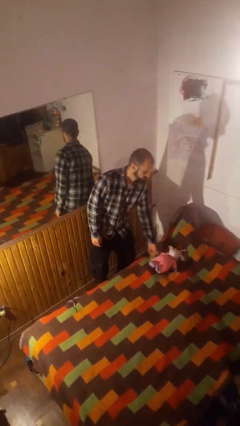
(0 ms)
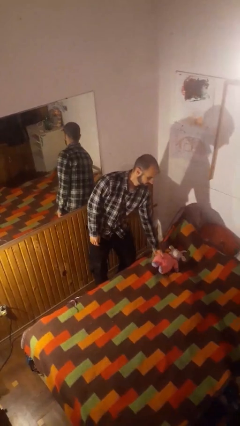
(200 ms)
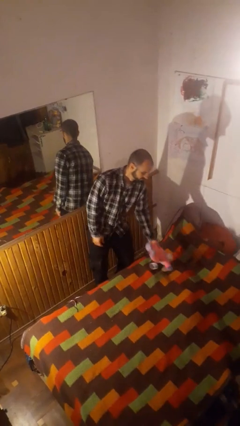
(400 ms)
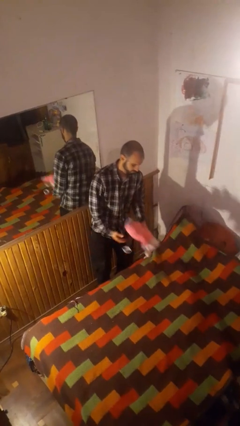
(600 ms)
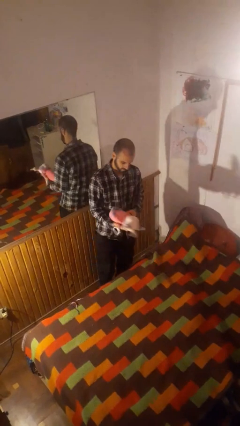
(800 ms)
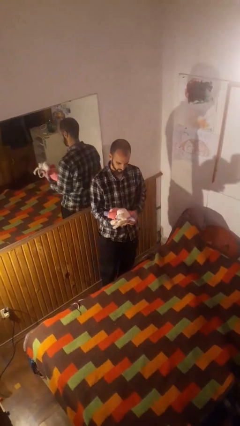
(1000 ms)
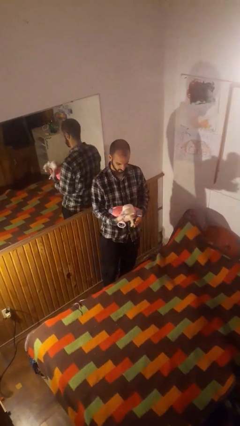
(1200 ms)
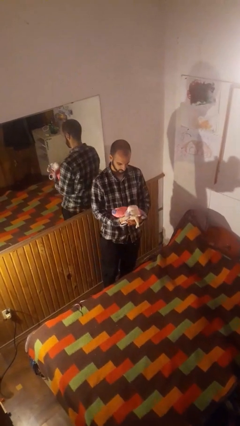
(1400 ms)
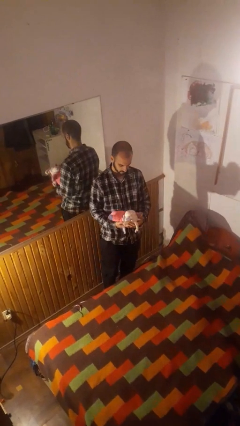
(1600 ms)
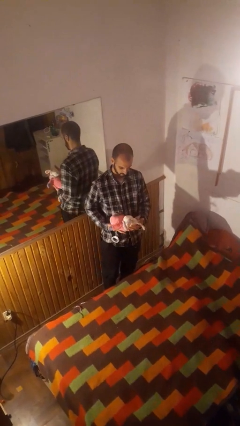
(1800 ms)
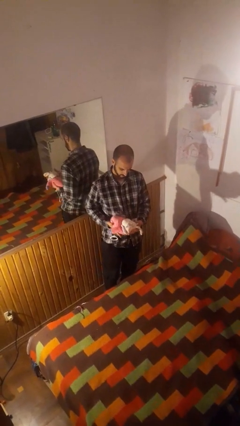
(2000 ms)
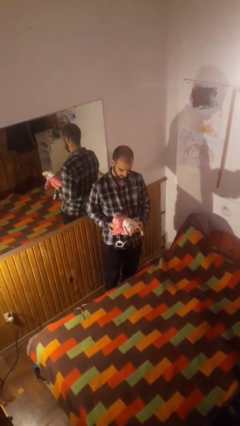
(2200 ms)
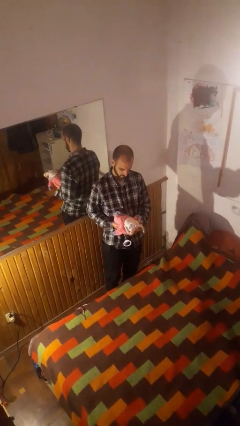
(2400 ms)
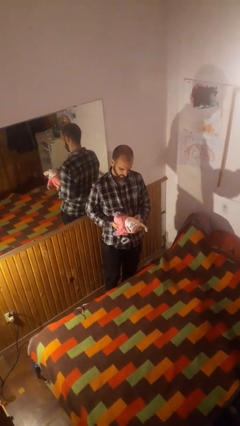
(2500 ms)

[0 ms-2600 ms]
person picks up object from bed

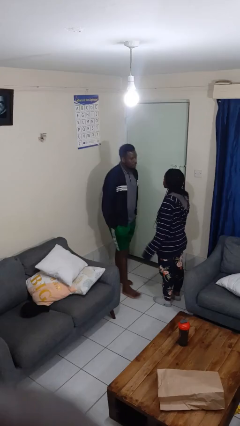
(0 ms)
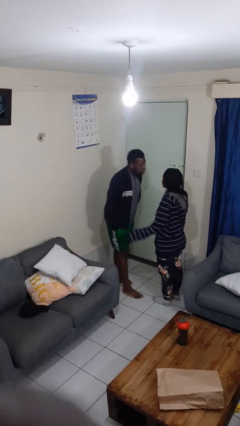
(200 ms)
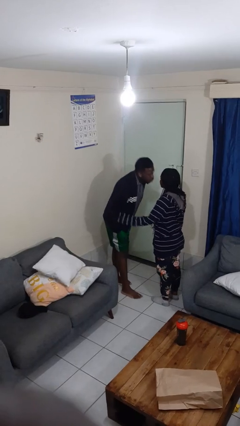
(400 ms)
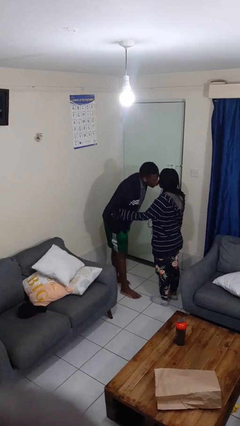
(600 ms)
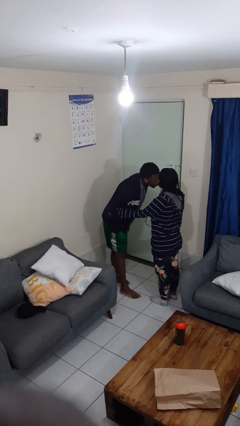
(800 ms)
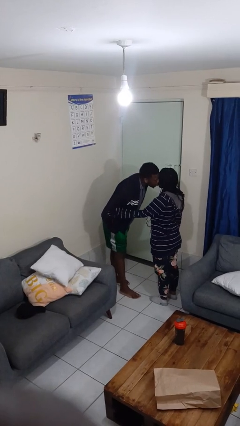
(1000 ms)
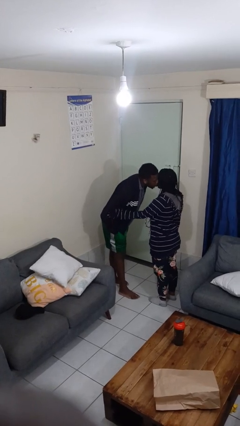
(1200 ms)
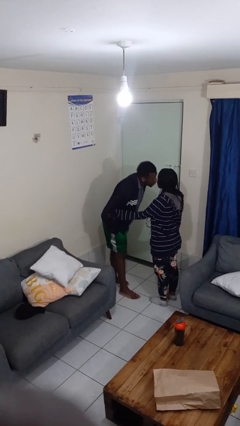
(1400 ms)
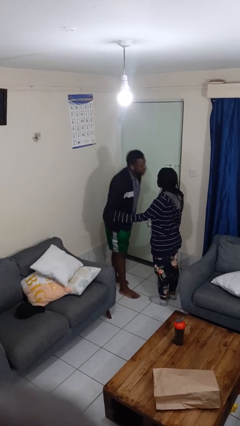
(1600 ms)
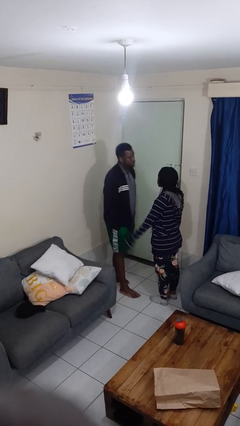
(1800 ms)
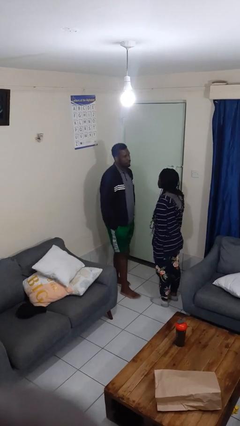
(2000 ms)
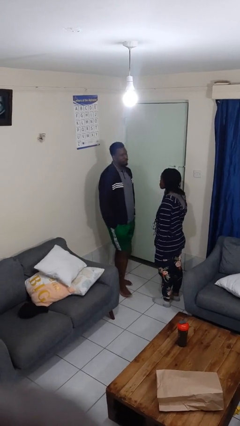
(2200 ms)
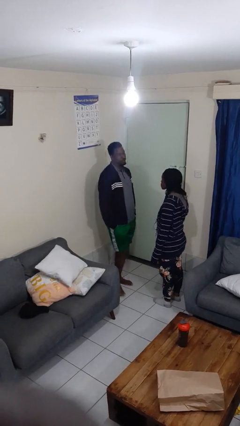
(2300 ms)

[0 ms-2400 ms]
person kisses cheek of person

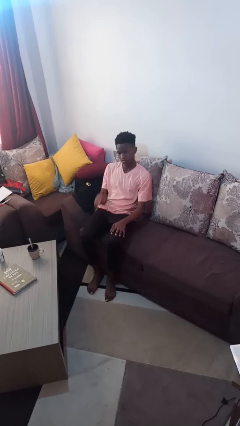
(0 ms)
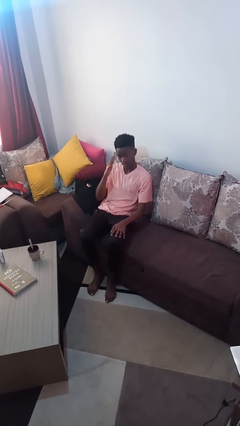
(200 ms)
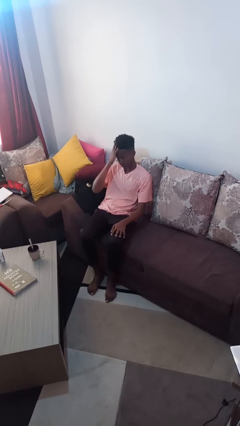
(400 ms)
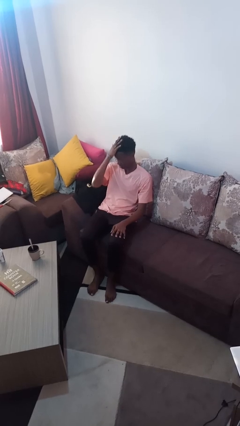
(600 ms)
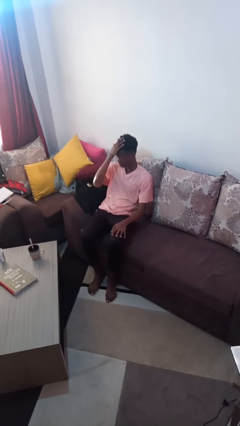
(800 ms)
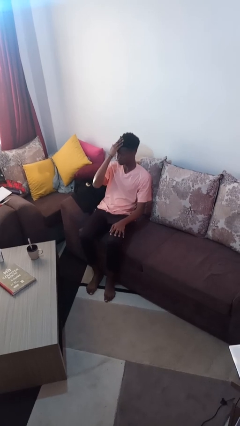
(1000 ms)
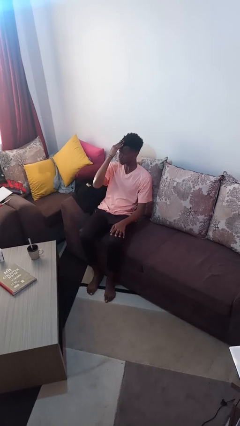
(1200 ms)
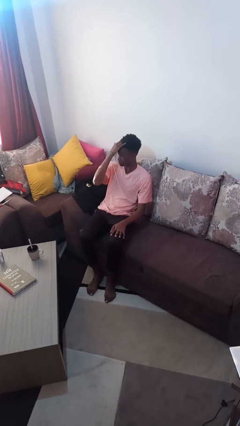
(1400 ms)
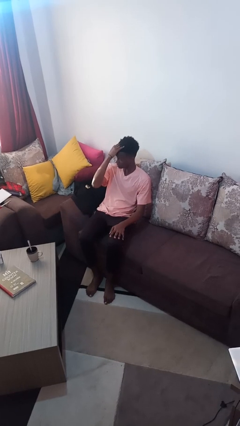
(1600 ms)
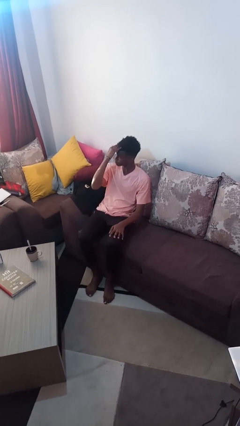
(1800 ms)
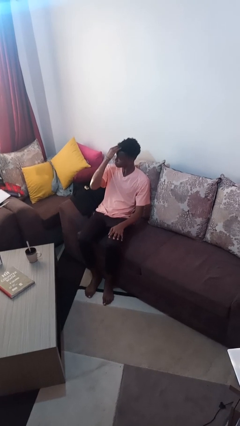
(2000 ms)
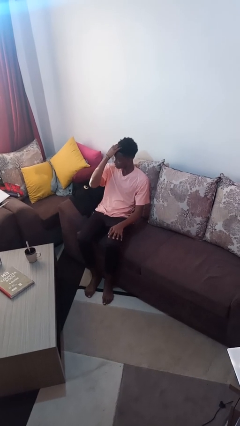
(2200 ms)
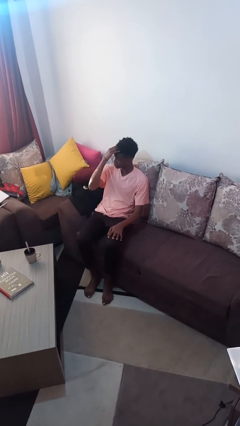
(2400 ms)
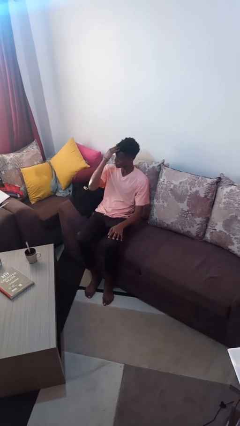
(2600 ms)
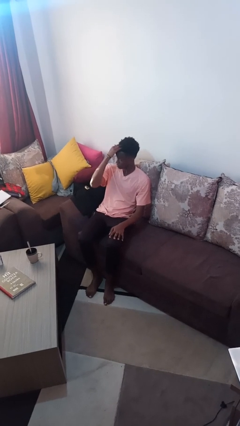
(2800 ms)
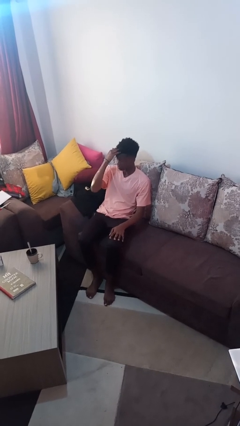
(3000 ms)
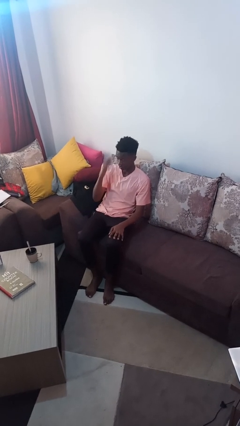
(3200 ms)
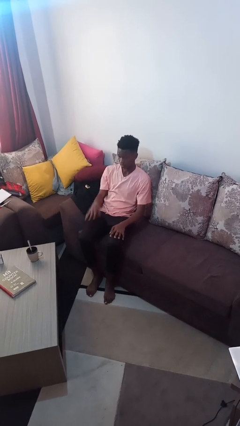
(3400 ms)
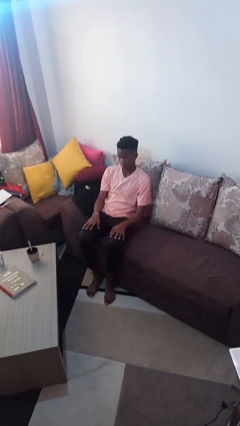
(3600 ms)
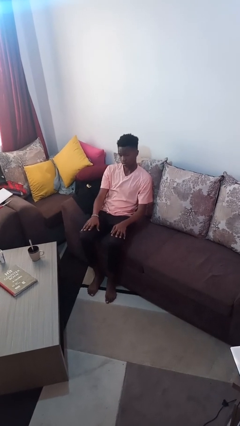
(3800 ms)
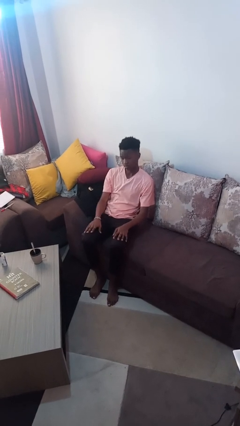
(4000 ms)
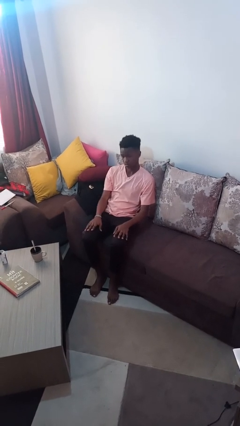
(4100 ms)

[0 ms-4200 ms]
person strokes hair

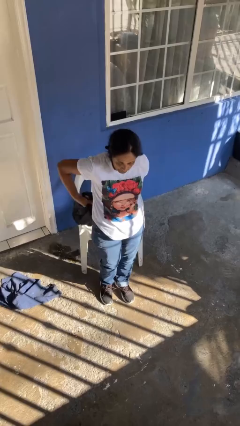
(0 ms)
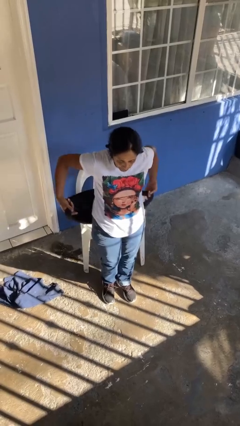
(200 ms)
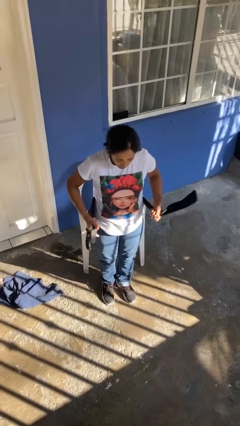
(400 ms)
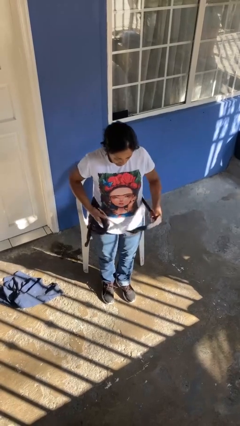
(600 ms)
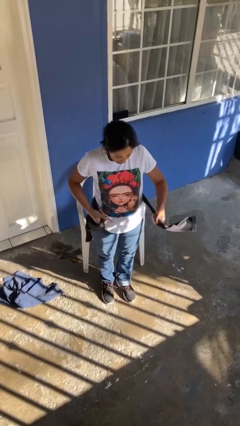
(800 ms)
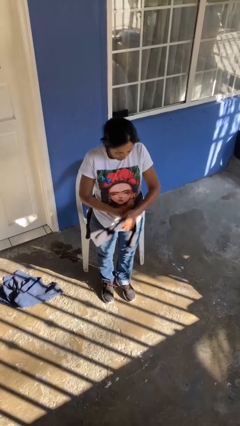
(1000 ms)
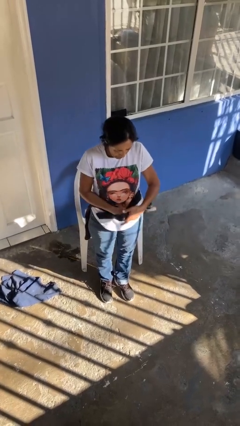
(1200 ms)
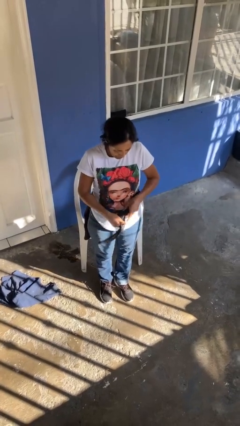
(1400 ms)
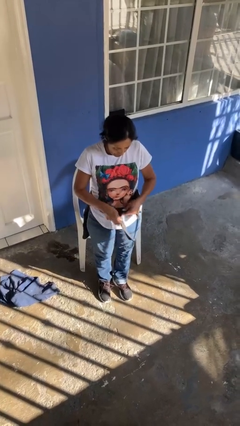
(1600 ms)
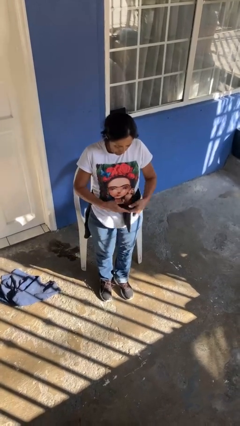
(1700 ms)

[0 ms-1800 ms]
person ties jacket around waist

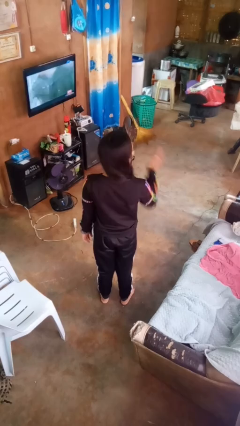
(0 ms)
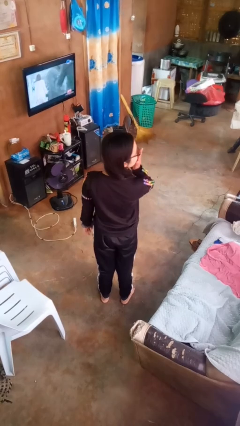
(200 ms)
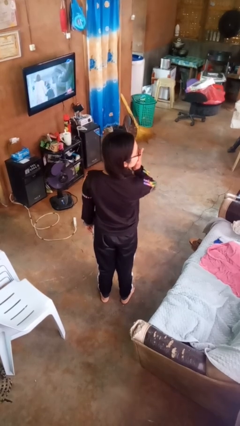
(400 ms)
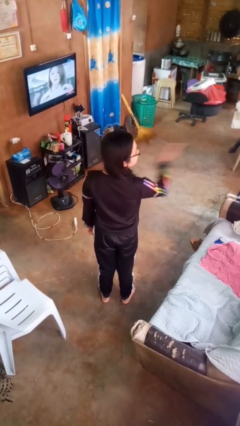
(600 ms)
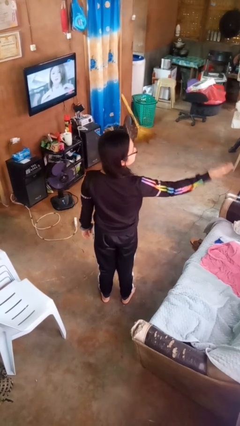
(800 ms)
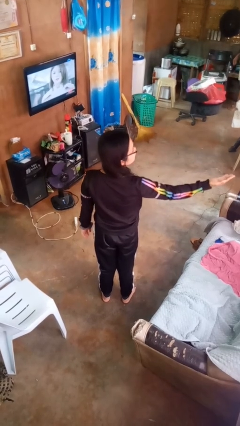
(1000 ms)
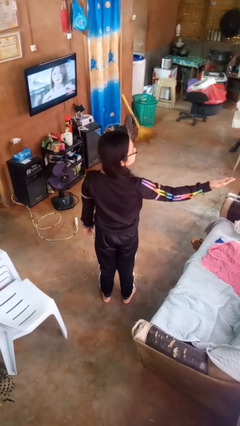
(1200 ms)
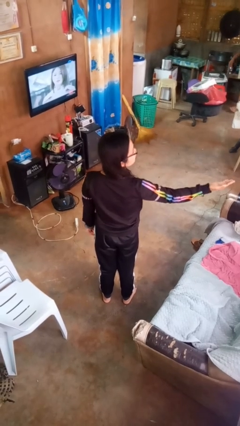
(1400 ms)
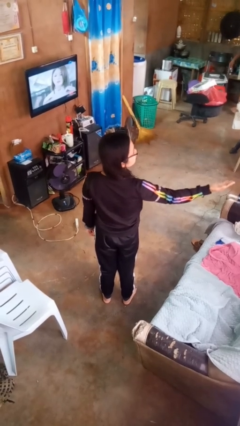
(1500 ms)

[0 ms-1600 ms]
person gestures blow kiss

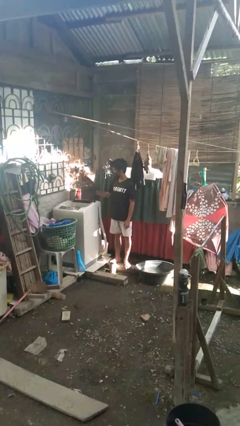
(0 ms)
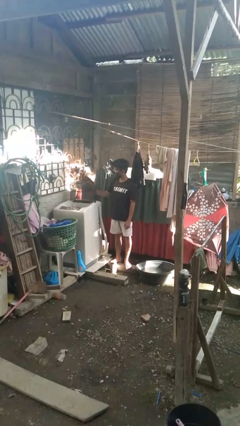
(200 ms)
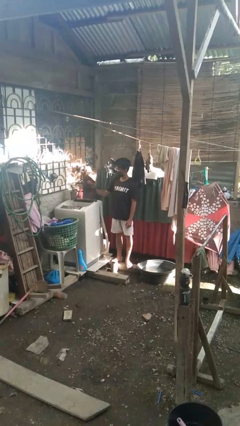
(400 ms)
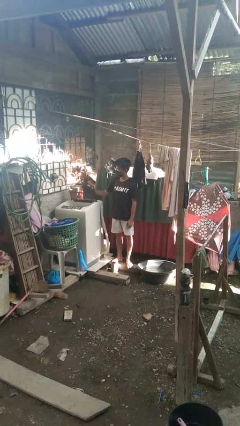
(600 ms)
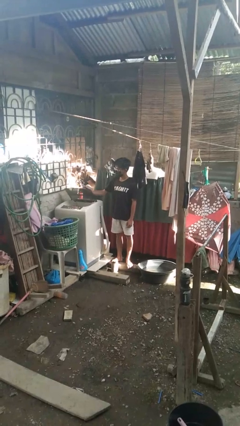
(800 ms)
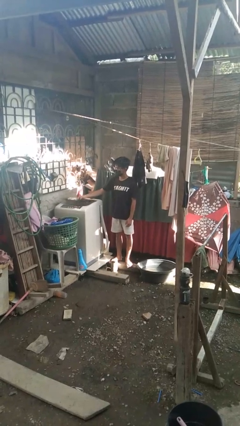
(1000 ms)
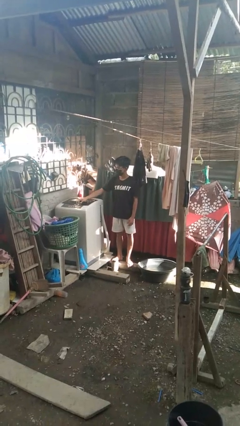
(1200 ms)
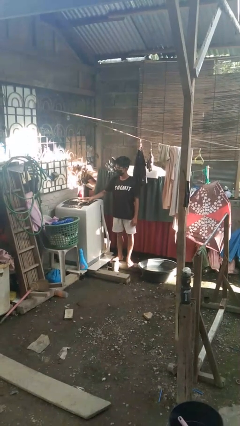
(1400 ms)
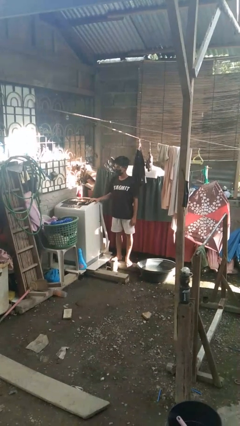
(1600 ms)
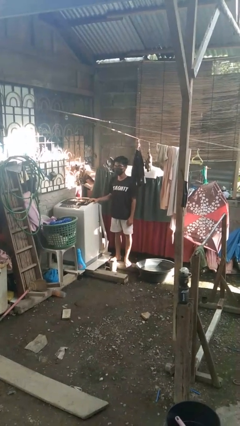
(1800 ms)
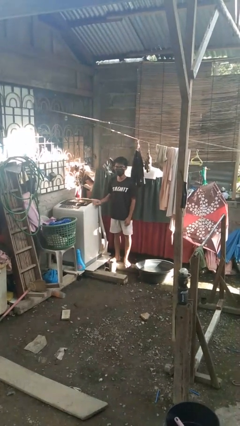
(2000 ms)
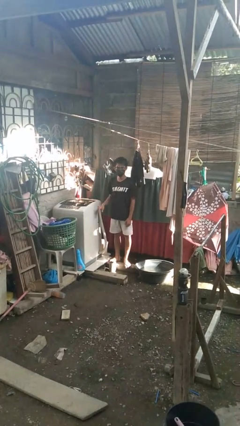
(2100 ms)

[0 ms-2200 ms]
person closes clothes washer

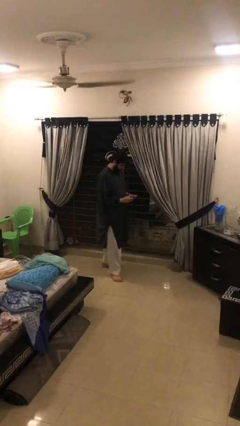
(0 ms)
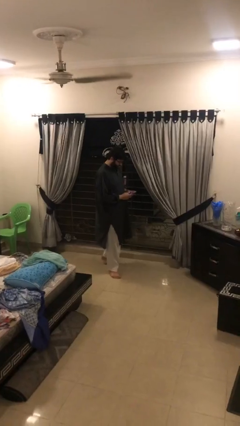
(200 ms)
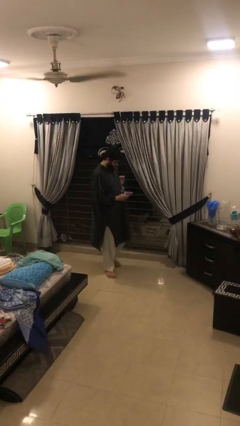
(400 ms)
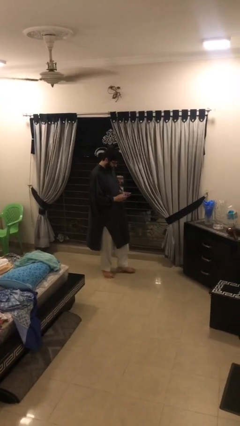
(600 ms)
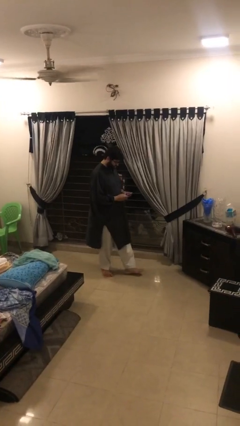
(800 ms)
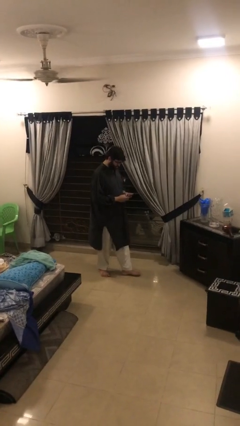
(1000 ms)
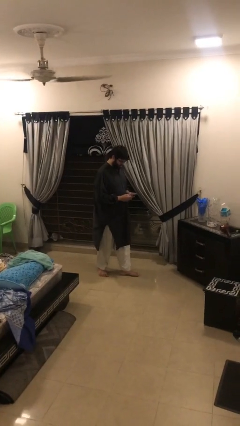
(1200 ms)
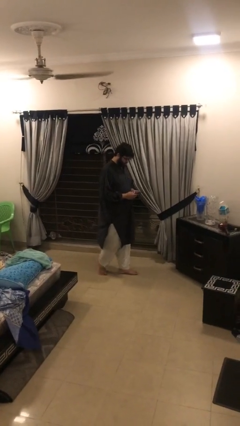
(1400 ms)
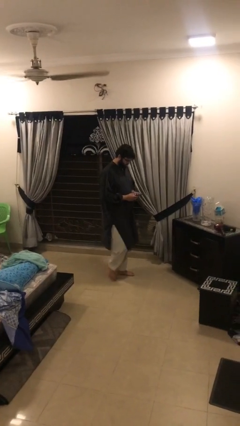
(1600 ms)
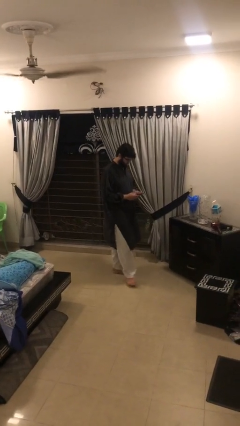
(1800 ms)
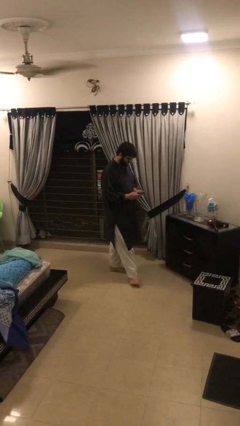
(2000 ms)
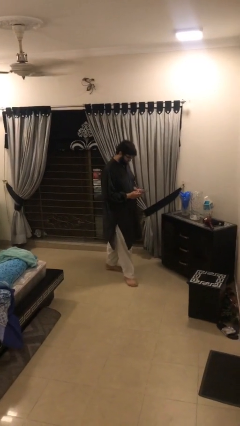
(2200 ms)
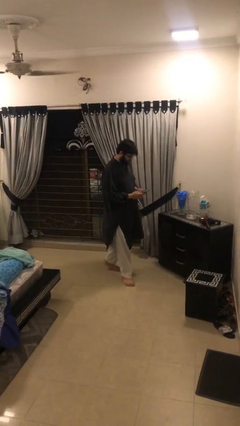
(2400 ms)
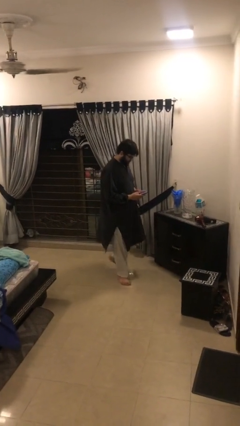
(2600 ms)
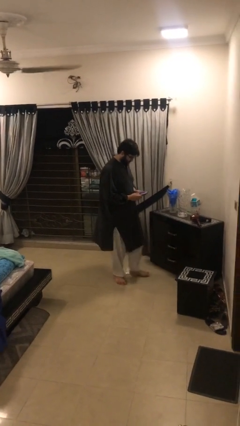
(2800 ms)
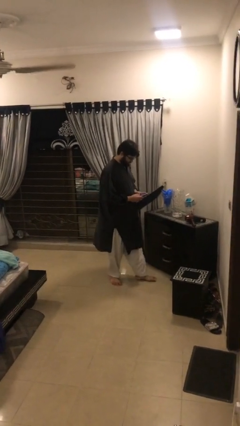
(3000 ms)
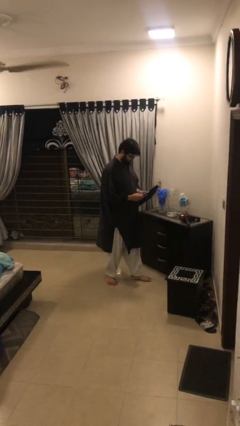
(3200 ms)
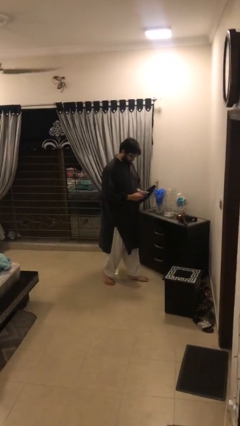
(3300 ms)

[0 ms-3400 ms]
person texts on phone
